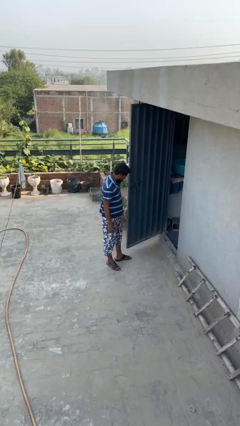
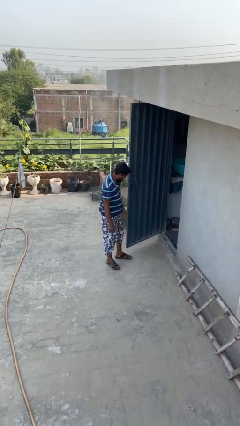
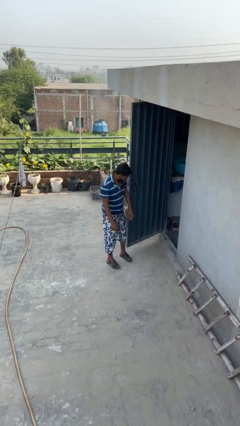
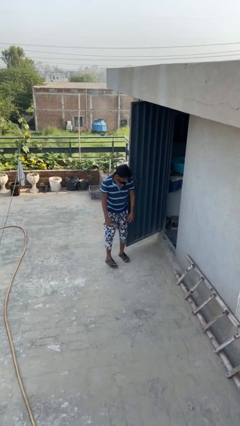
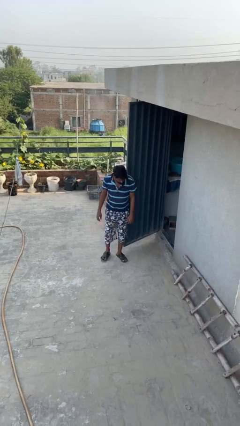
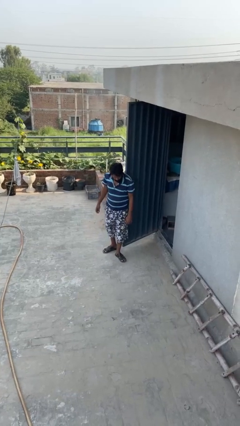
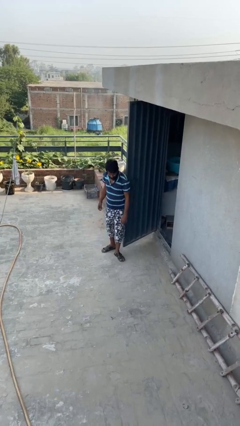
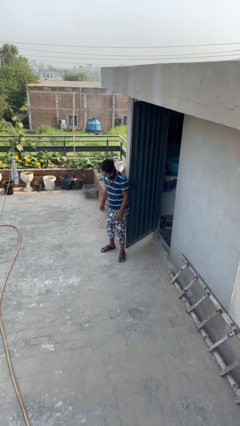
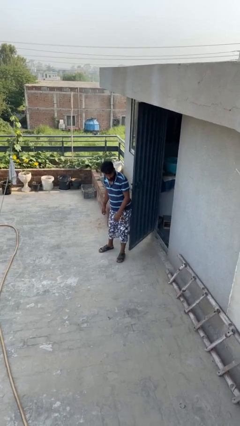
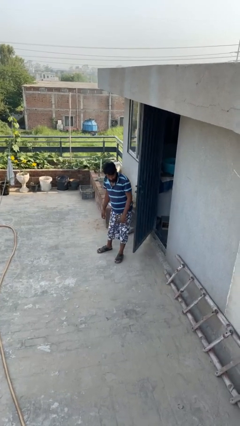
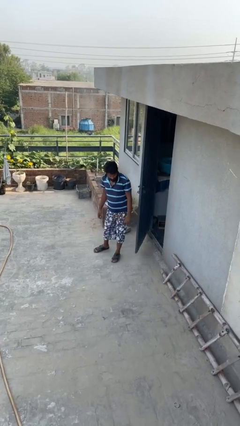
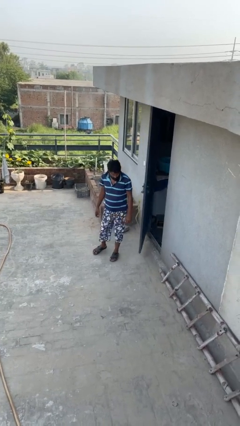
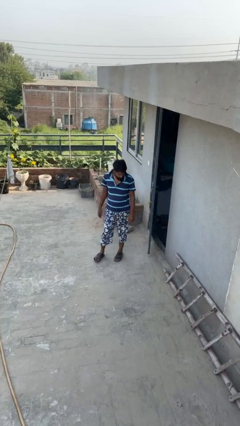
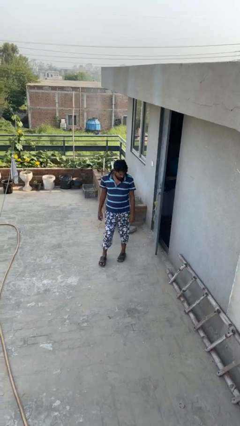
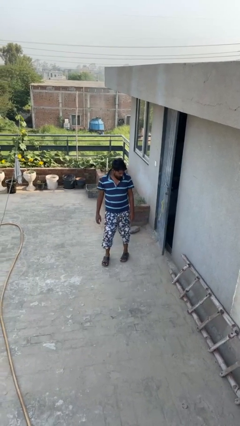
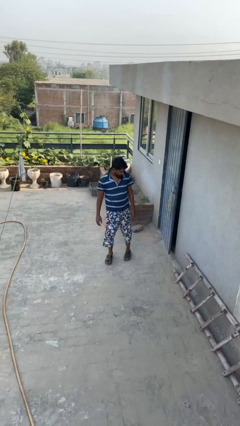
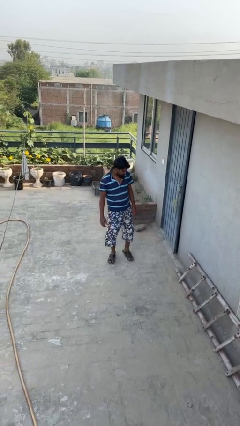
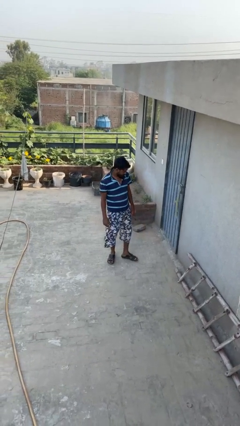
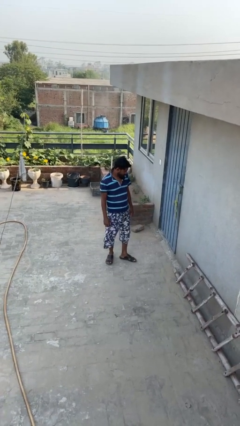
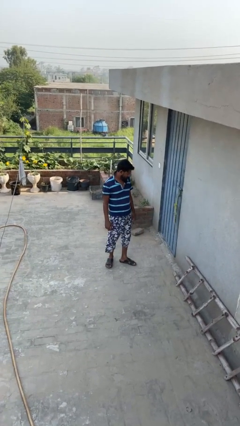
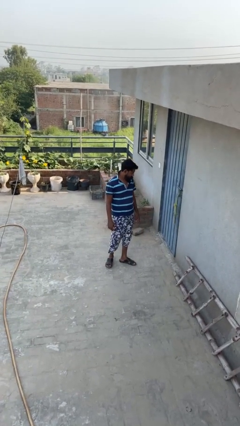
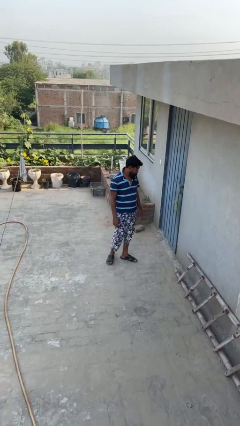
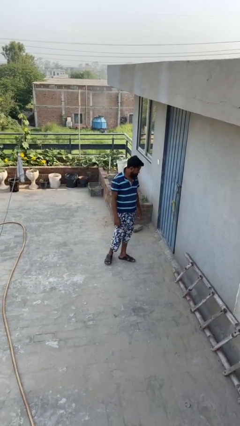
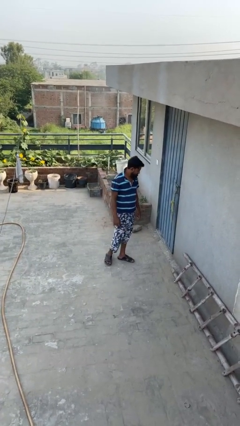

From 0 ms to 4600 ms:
person closes door with hip

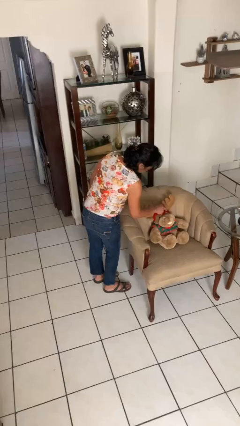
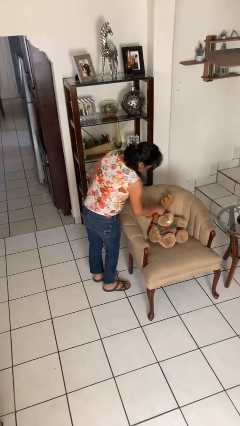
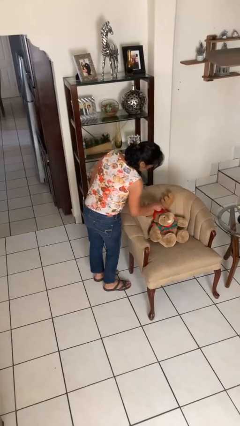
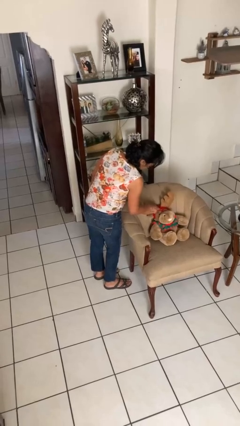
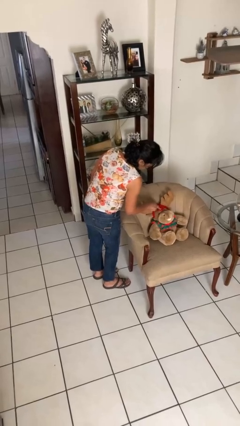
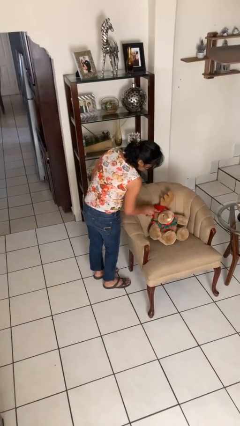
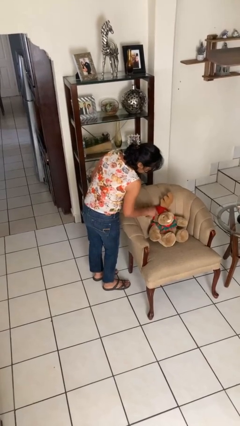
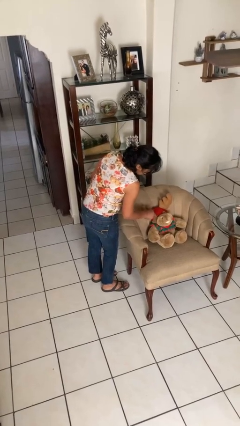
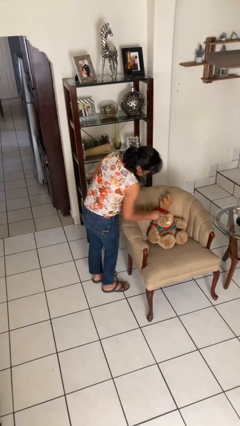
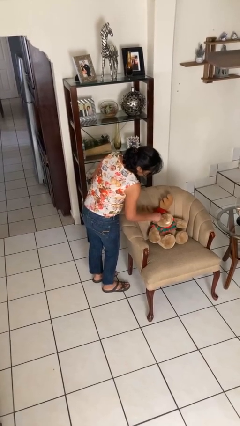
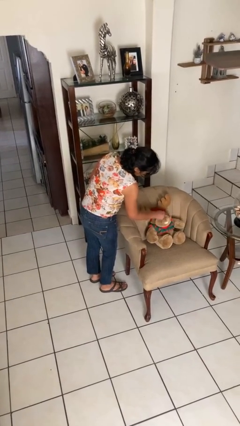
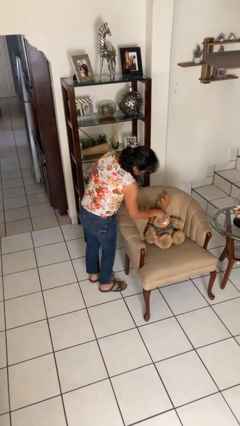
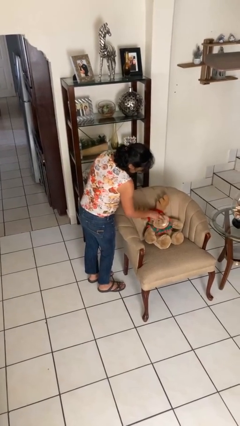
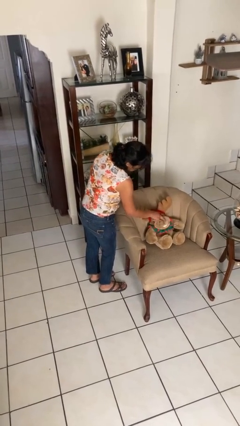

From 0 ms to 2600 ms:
person taps object with finger

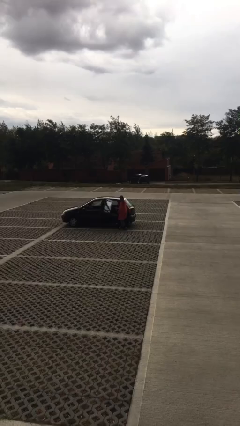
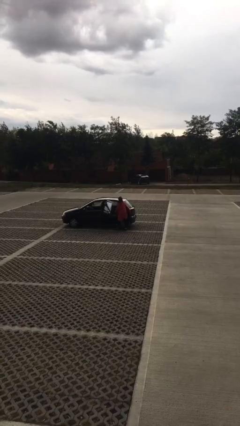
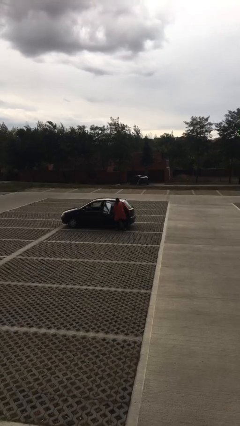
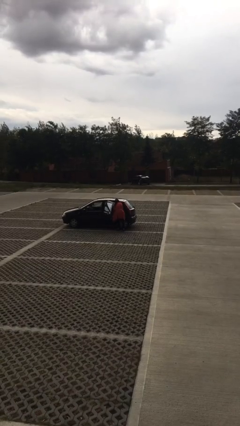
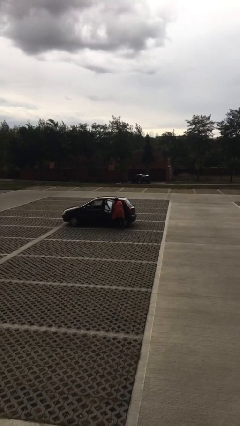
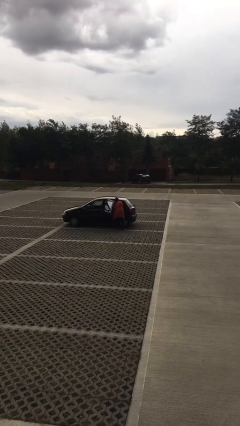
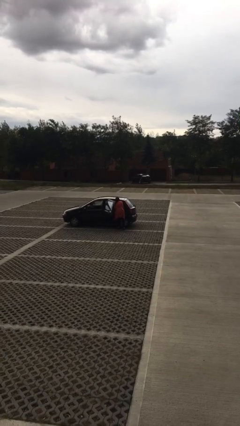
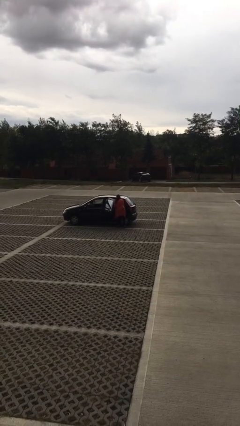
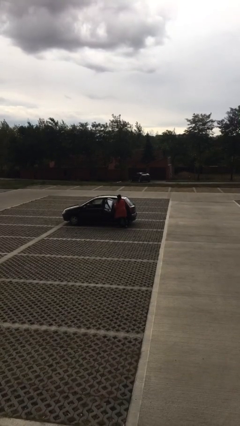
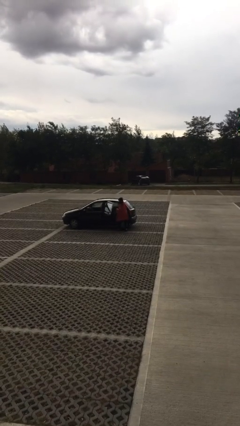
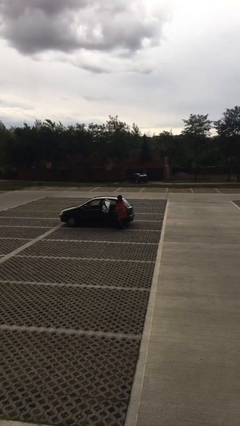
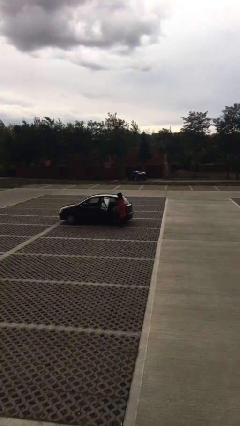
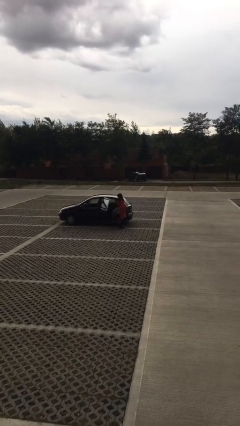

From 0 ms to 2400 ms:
person unloads car

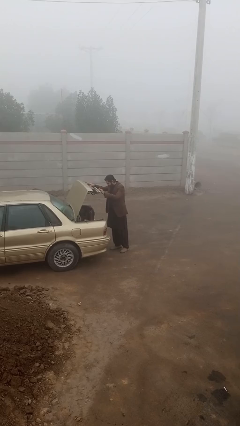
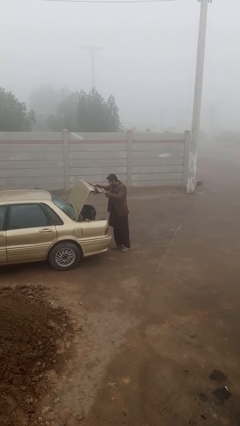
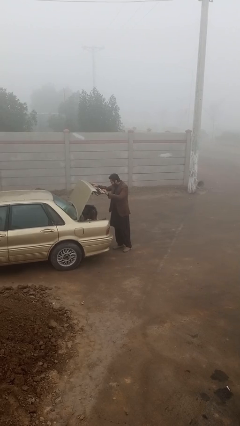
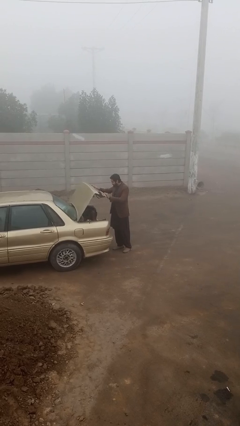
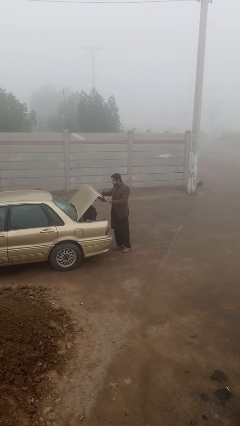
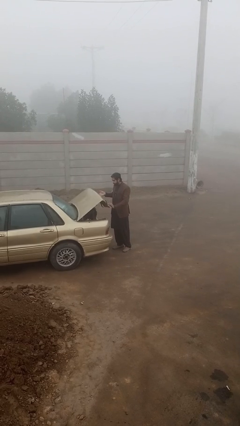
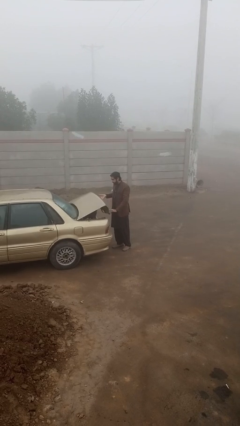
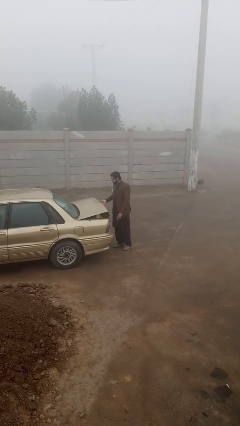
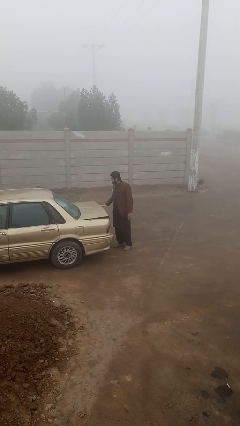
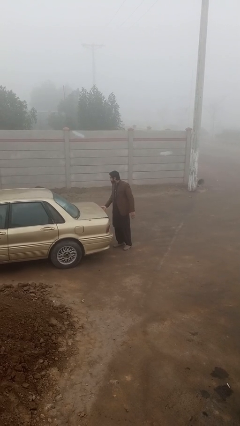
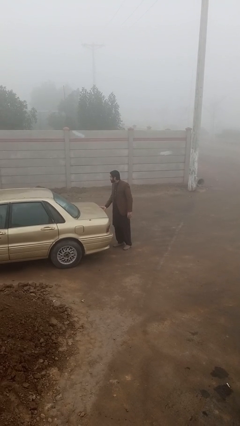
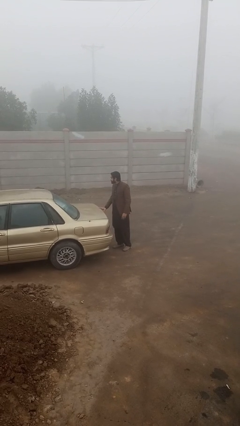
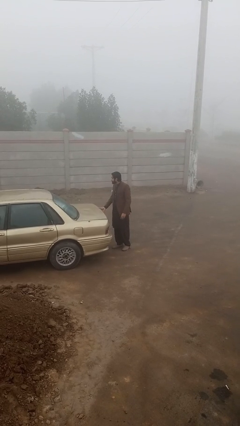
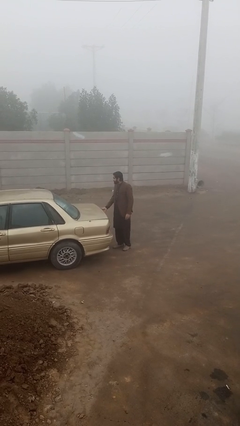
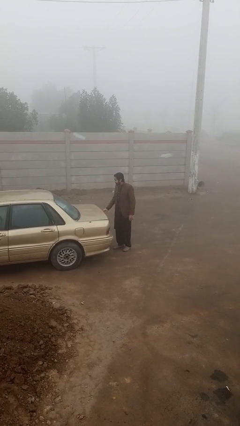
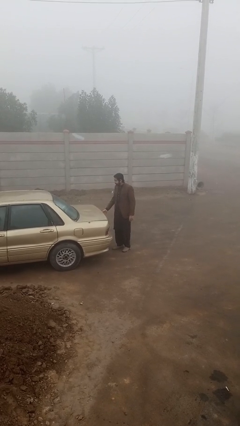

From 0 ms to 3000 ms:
person closes car trunk

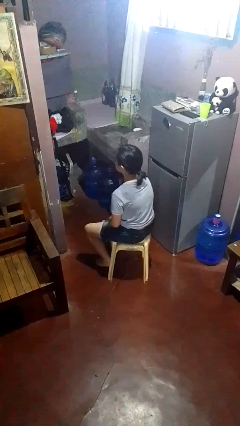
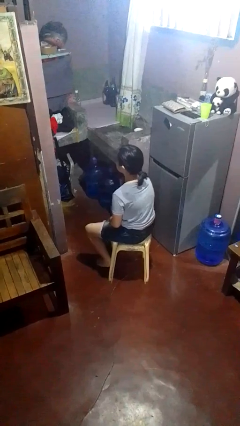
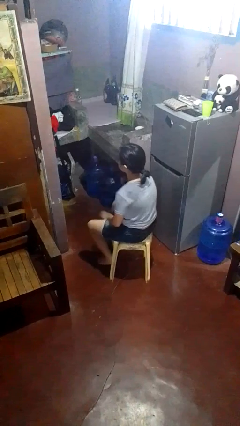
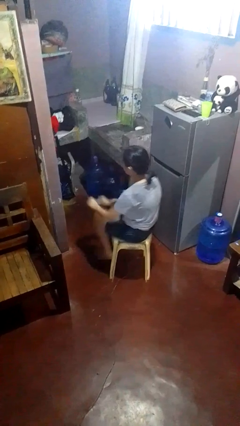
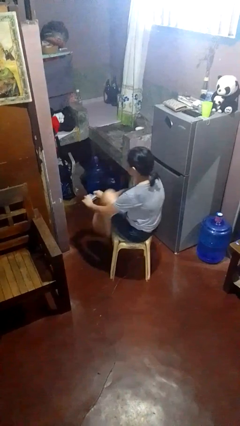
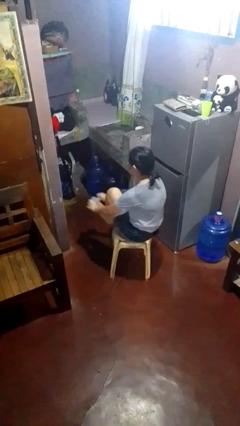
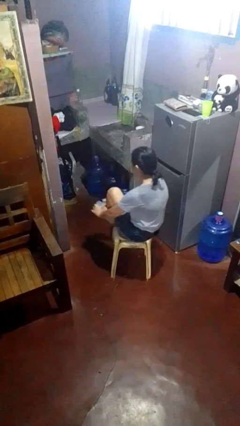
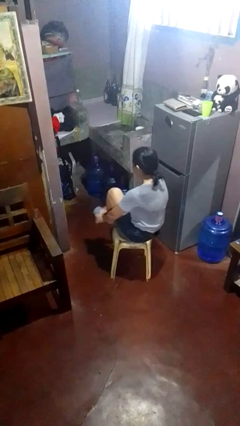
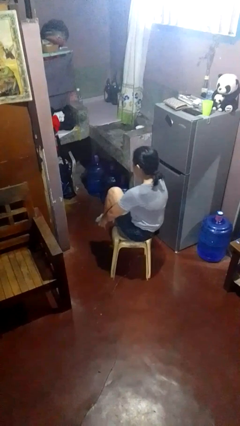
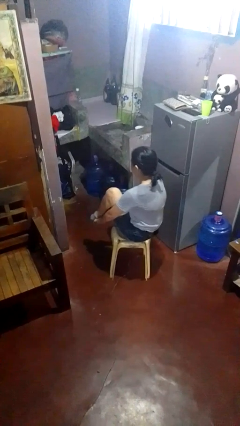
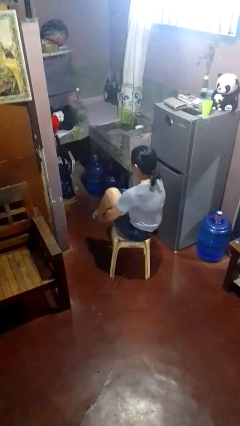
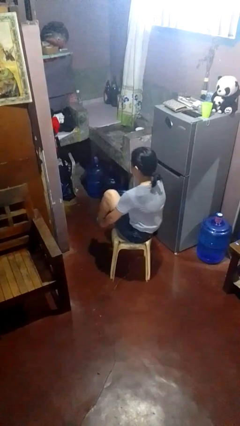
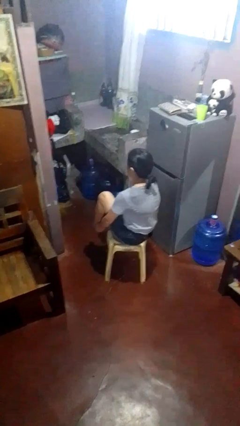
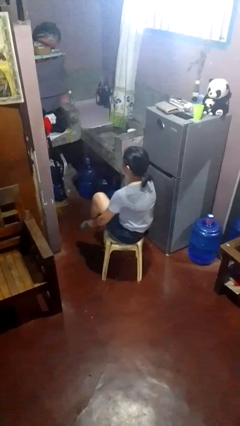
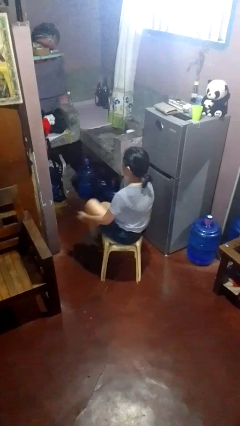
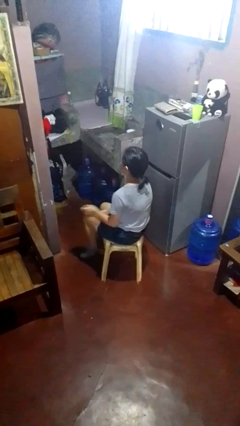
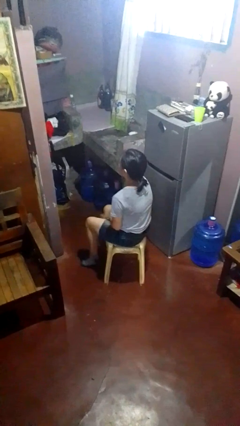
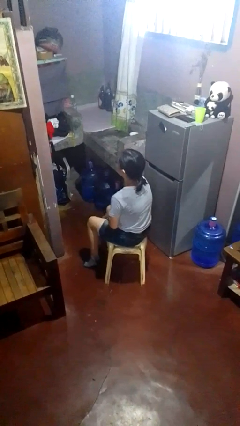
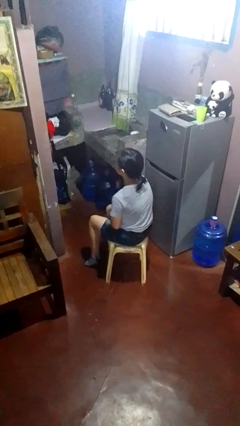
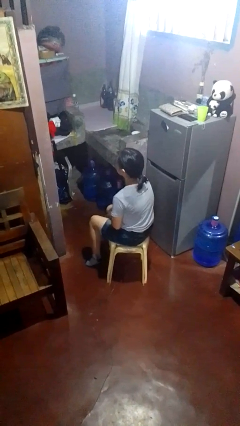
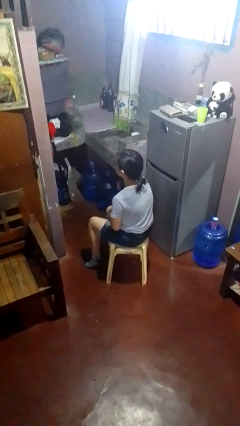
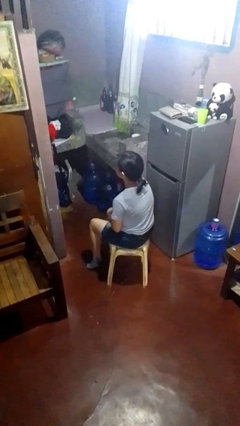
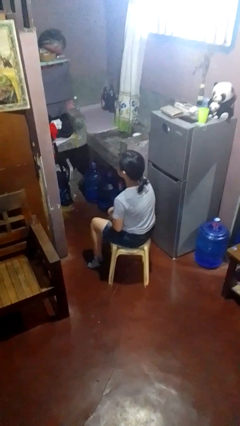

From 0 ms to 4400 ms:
person puts on socks
